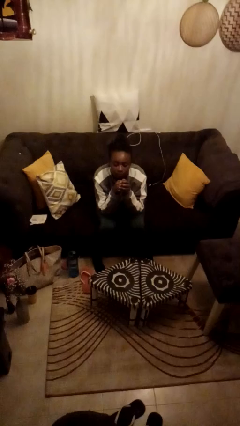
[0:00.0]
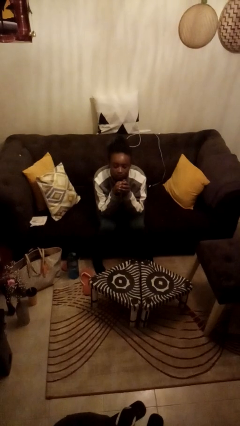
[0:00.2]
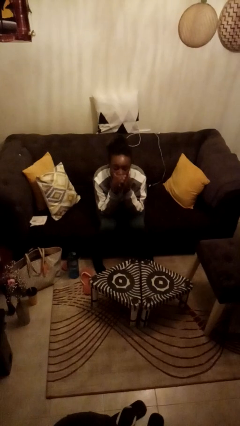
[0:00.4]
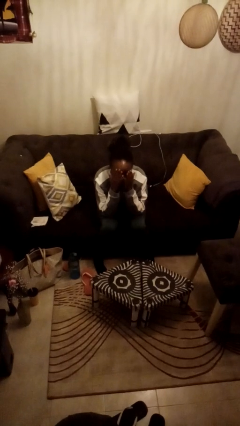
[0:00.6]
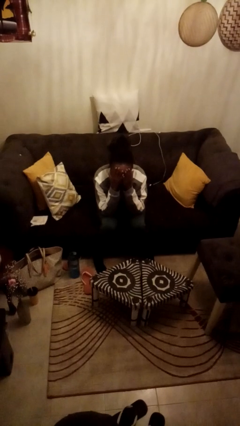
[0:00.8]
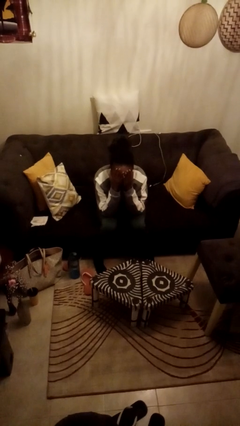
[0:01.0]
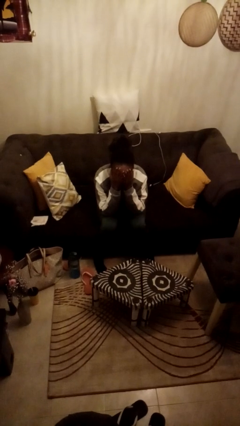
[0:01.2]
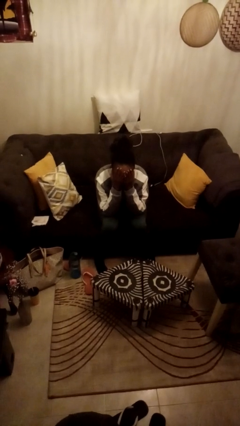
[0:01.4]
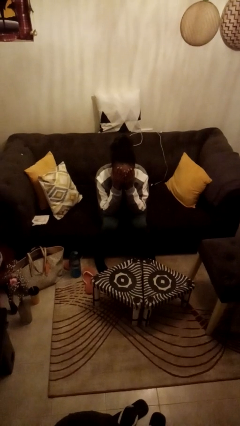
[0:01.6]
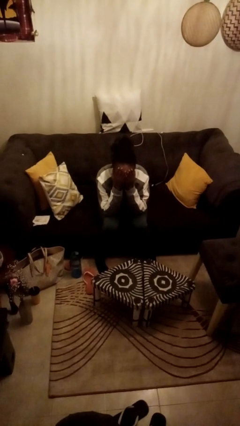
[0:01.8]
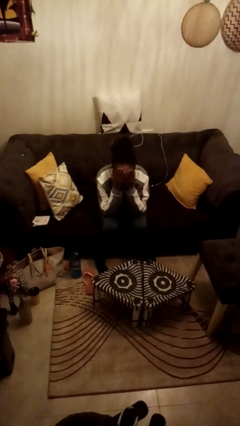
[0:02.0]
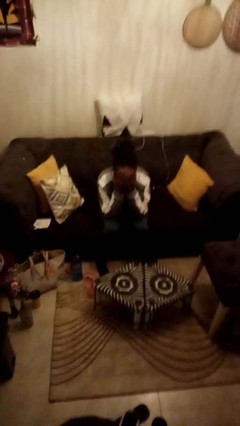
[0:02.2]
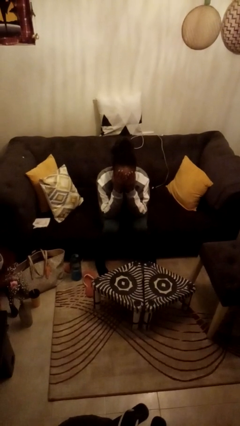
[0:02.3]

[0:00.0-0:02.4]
person covers face with hands

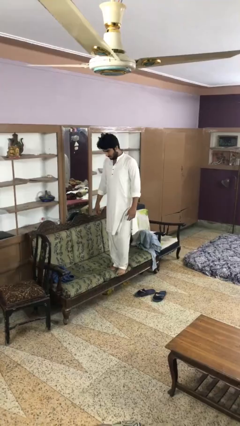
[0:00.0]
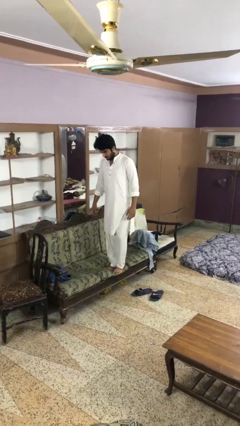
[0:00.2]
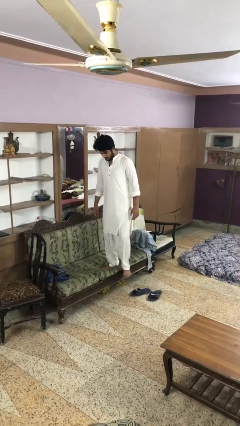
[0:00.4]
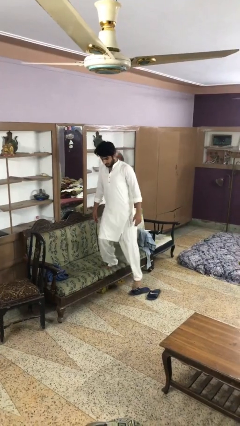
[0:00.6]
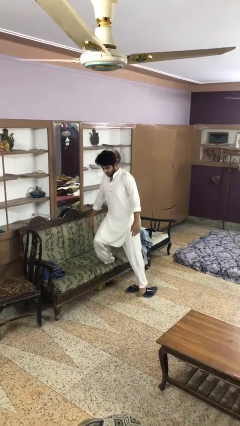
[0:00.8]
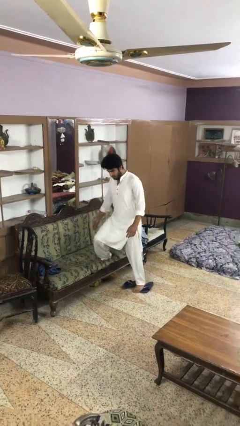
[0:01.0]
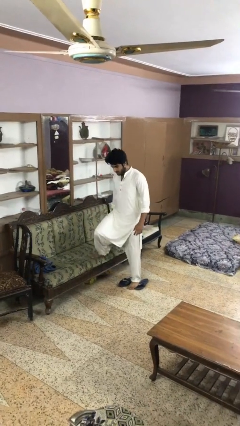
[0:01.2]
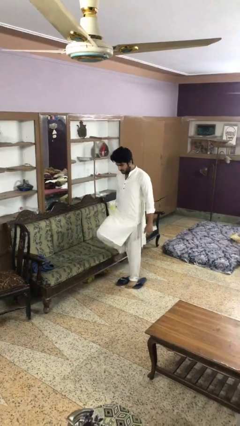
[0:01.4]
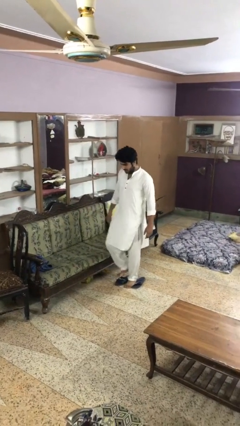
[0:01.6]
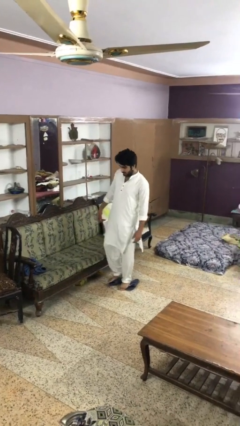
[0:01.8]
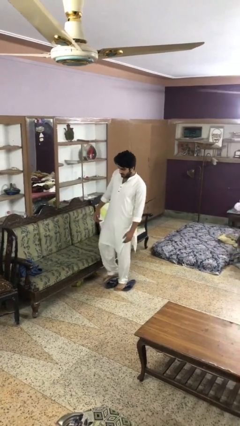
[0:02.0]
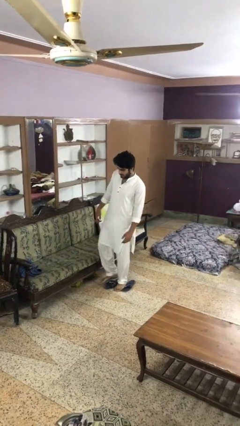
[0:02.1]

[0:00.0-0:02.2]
person climbs off couch

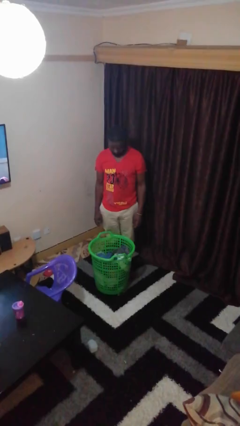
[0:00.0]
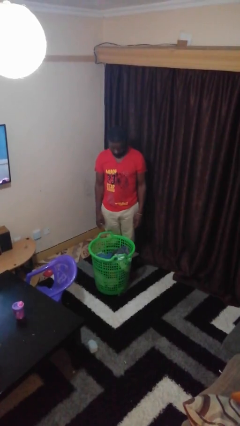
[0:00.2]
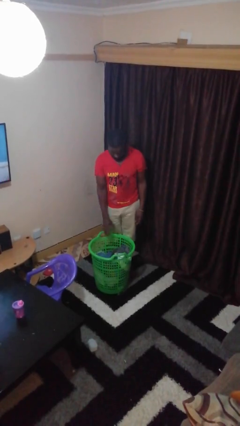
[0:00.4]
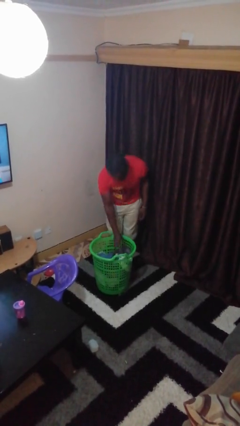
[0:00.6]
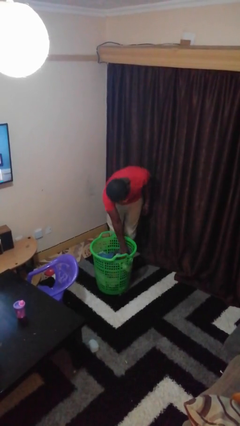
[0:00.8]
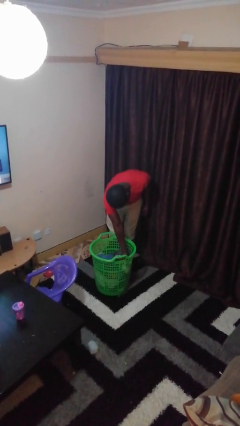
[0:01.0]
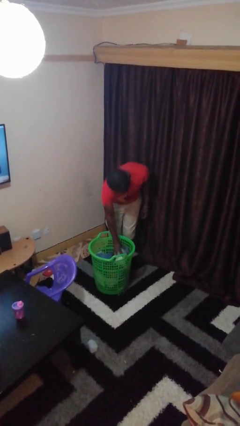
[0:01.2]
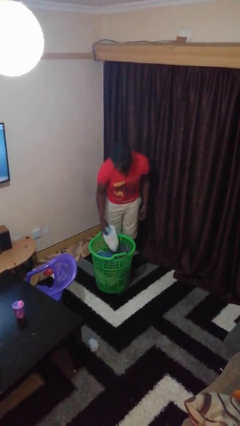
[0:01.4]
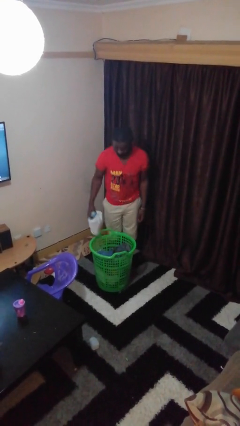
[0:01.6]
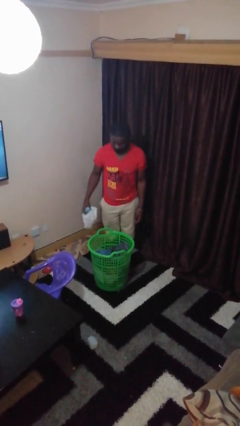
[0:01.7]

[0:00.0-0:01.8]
person takes object from basket

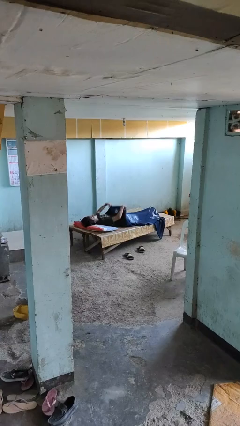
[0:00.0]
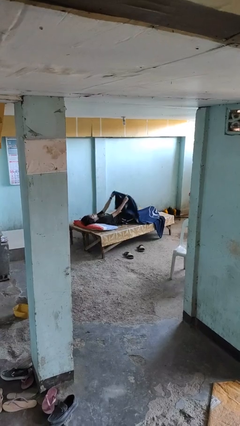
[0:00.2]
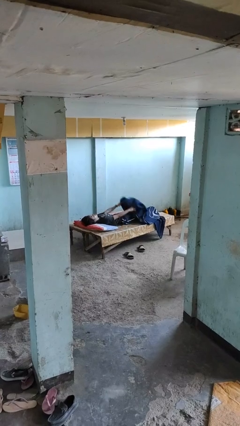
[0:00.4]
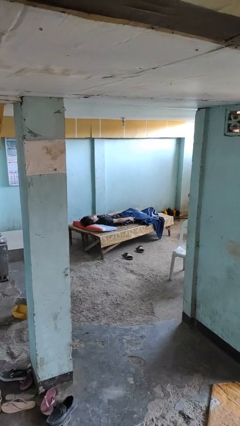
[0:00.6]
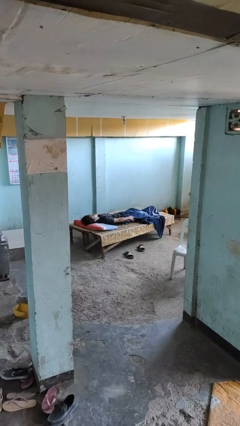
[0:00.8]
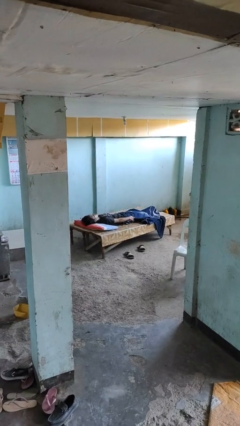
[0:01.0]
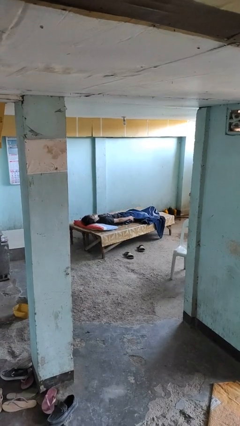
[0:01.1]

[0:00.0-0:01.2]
person uncovers with blanket

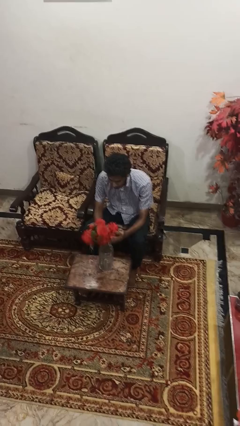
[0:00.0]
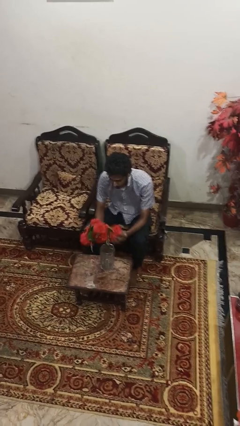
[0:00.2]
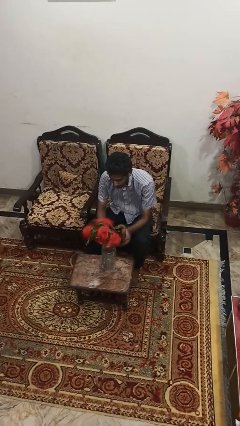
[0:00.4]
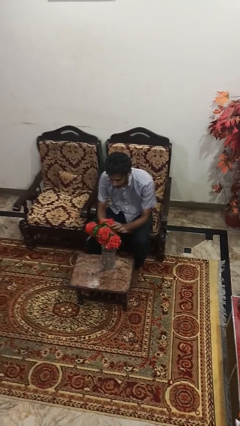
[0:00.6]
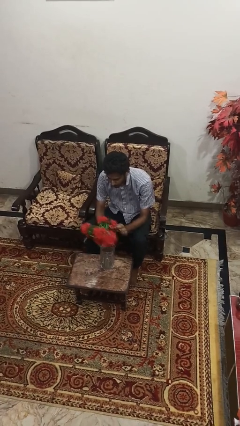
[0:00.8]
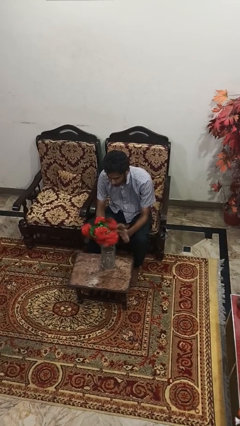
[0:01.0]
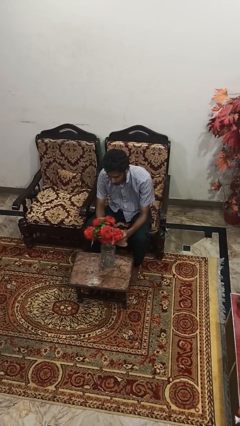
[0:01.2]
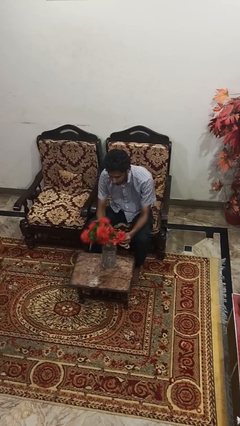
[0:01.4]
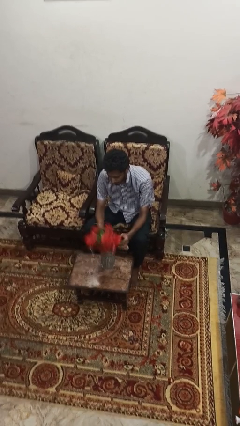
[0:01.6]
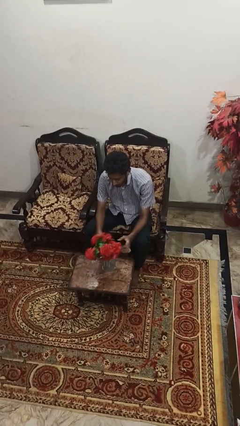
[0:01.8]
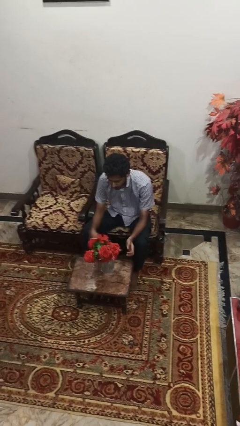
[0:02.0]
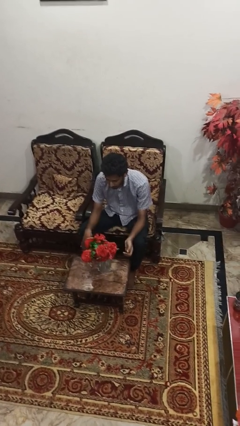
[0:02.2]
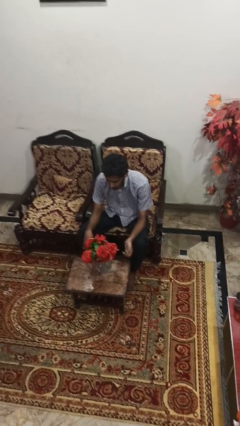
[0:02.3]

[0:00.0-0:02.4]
person arranges flowers in vase

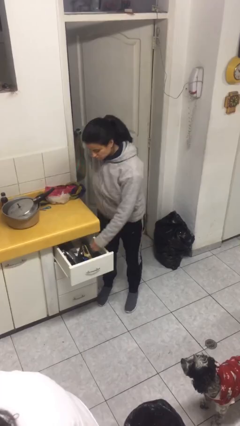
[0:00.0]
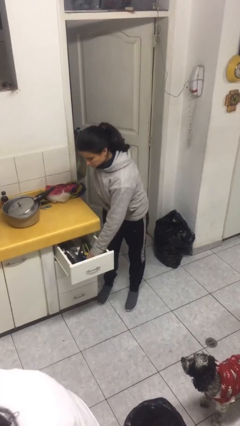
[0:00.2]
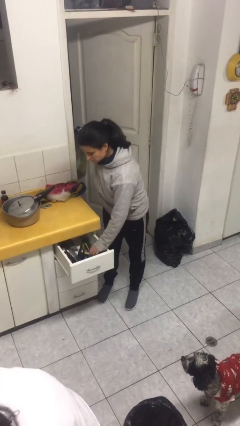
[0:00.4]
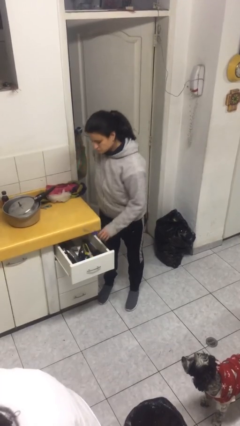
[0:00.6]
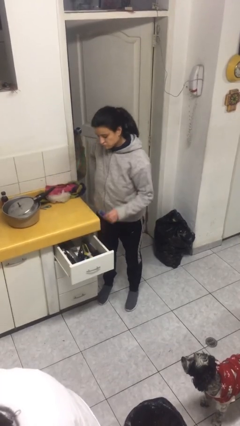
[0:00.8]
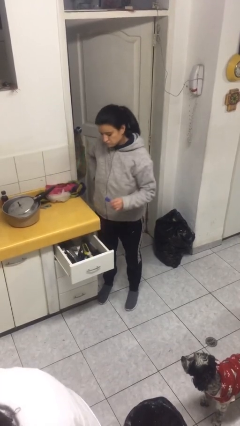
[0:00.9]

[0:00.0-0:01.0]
person takes object from kitchen drawer

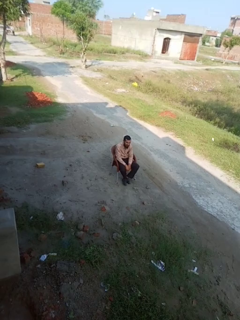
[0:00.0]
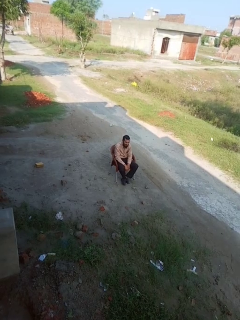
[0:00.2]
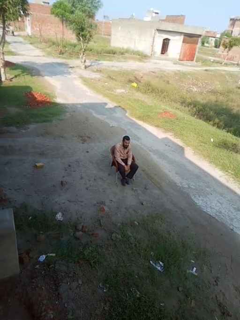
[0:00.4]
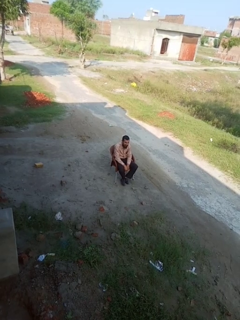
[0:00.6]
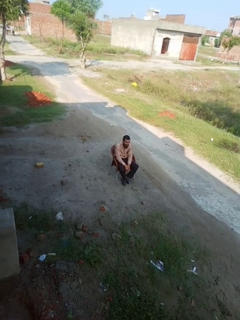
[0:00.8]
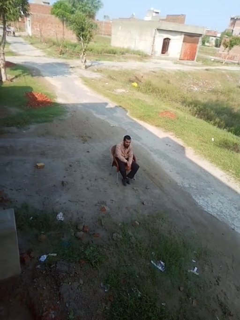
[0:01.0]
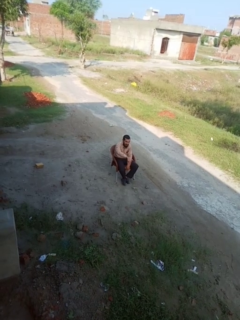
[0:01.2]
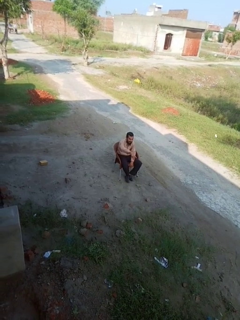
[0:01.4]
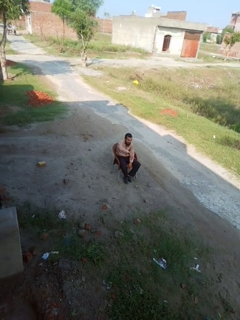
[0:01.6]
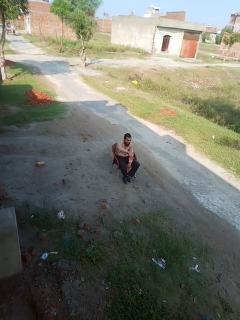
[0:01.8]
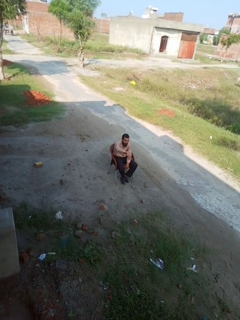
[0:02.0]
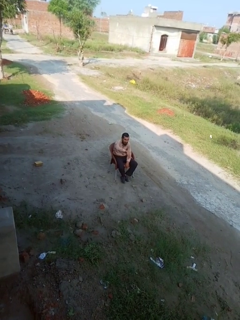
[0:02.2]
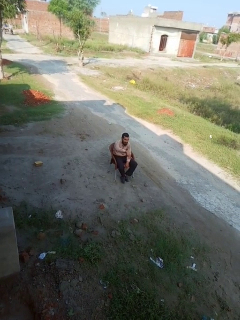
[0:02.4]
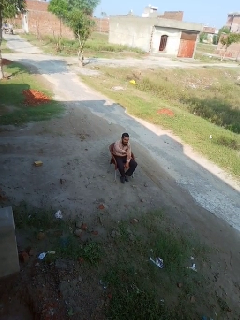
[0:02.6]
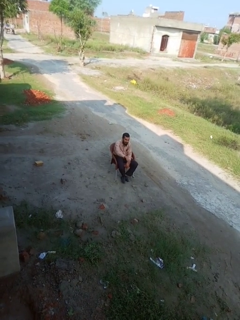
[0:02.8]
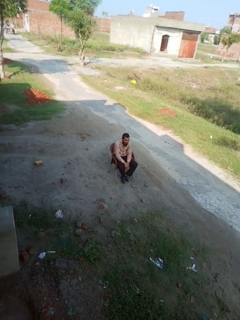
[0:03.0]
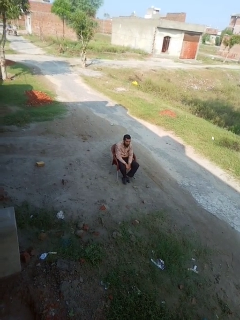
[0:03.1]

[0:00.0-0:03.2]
person gestures hang loose

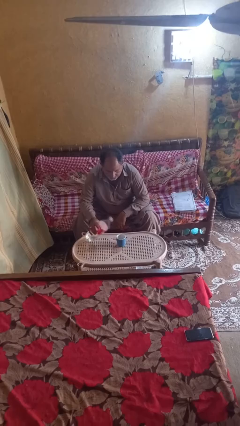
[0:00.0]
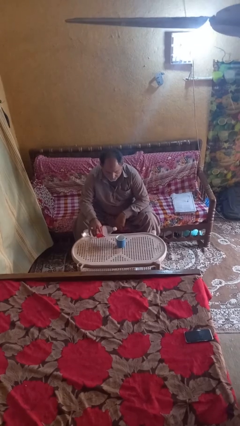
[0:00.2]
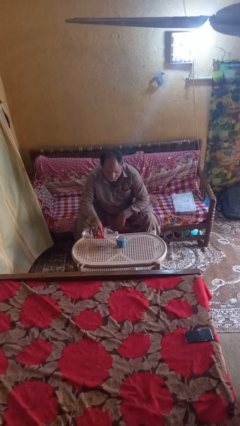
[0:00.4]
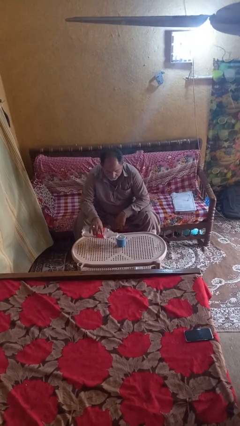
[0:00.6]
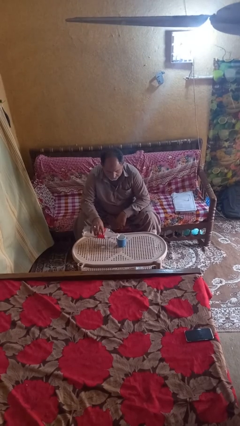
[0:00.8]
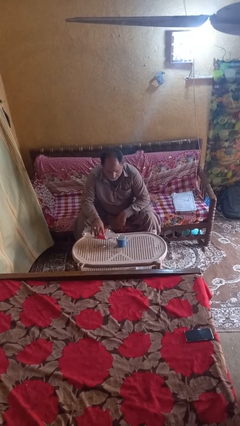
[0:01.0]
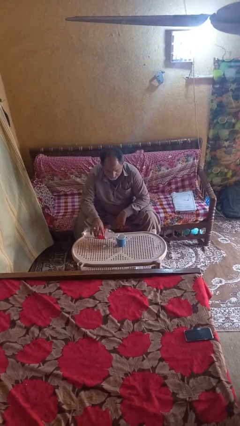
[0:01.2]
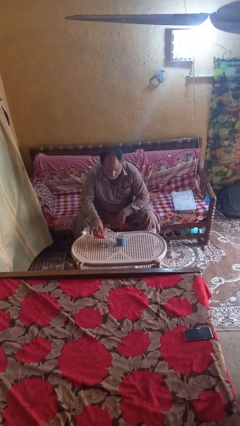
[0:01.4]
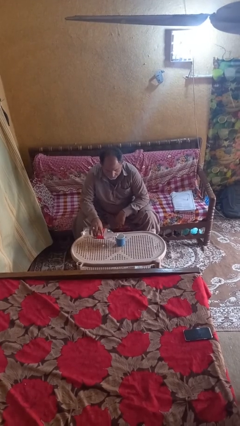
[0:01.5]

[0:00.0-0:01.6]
person pours liquid into cup

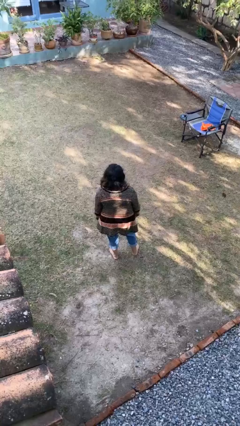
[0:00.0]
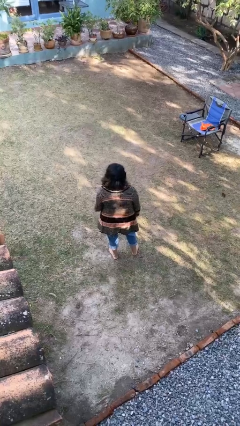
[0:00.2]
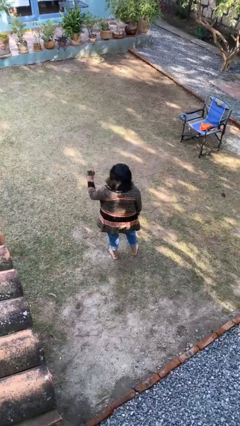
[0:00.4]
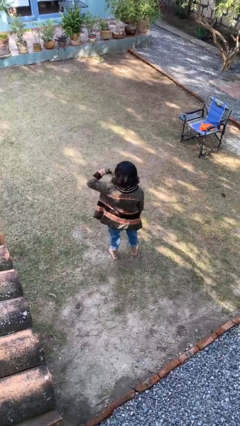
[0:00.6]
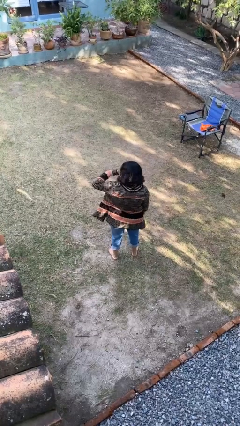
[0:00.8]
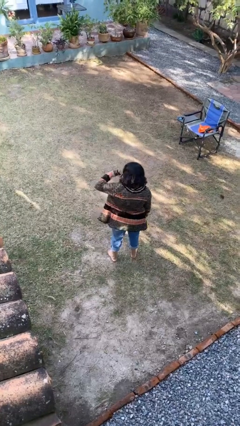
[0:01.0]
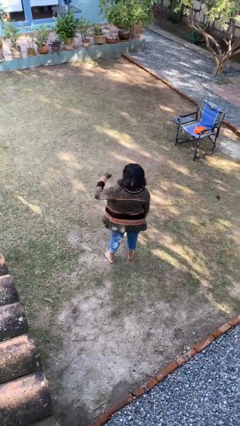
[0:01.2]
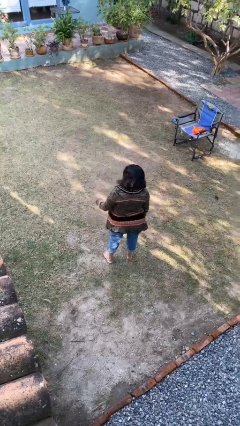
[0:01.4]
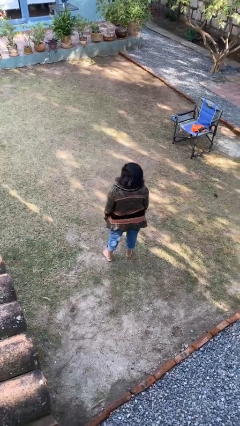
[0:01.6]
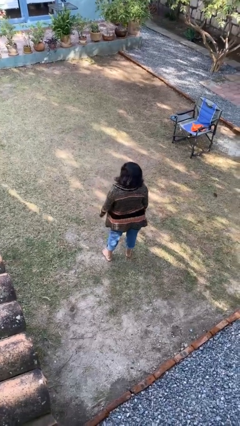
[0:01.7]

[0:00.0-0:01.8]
person gestures call me
